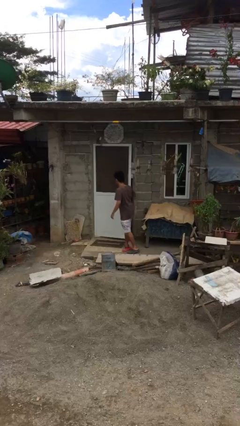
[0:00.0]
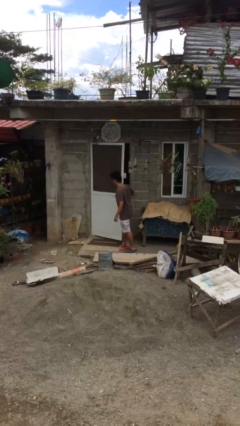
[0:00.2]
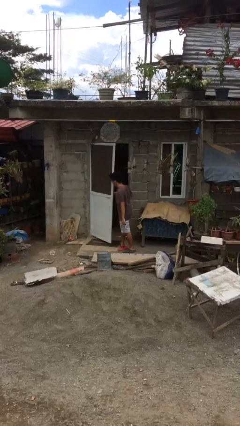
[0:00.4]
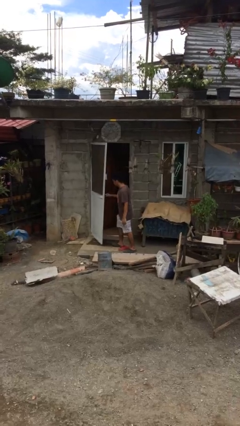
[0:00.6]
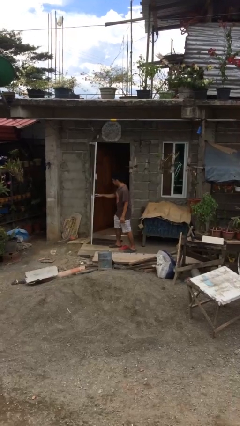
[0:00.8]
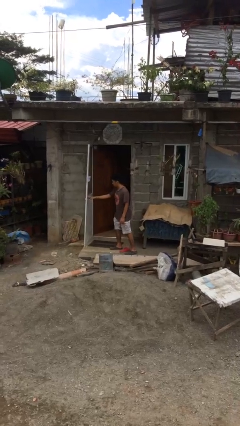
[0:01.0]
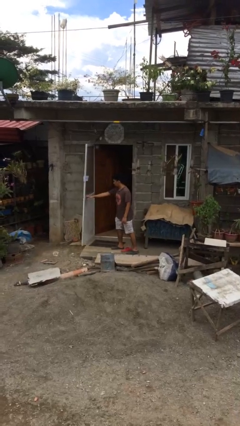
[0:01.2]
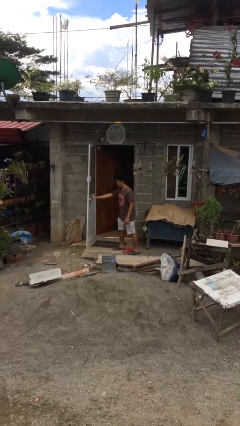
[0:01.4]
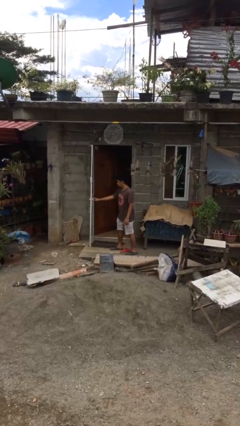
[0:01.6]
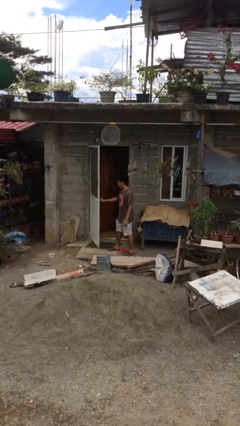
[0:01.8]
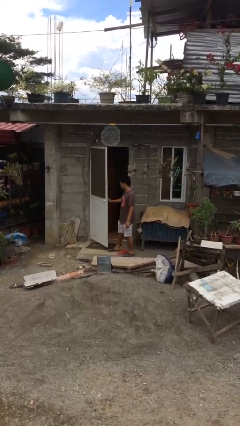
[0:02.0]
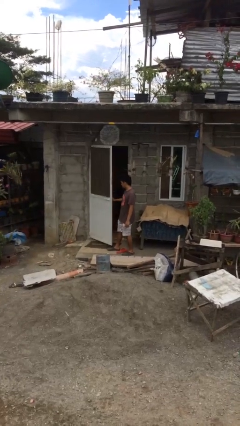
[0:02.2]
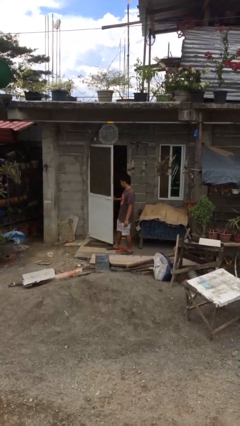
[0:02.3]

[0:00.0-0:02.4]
person opens facility door

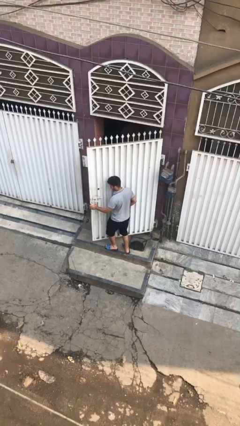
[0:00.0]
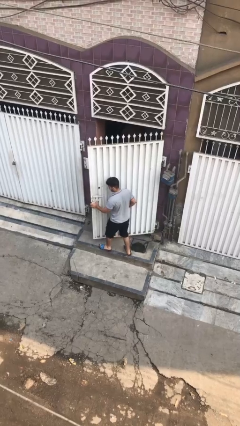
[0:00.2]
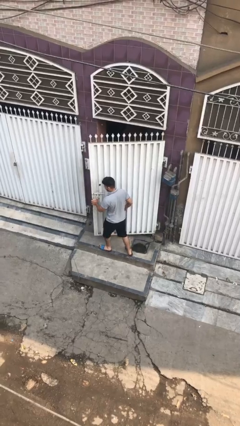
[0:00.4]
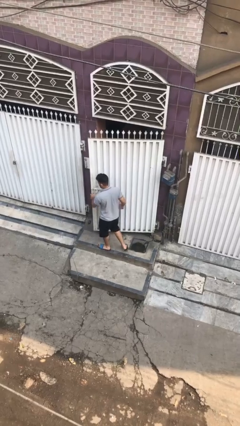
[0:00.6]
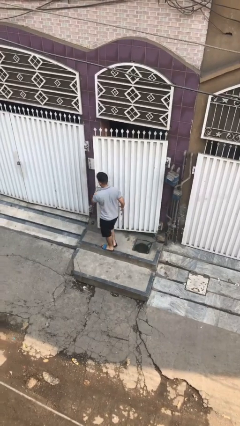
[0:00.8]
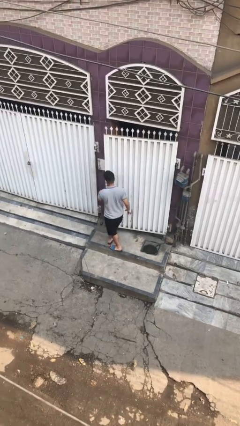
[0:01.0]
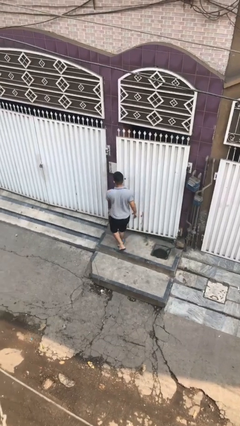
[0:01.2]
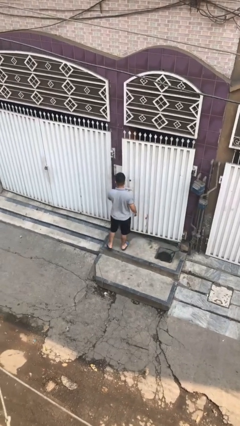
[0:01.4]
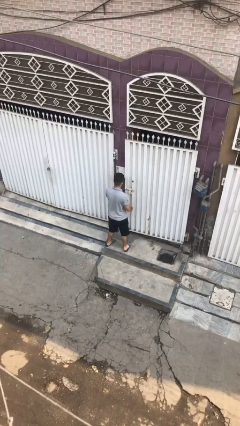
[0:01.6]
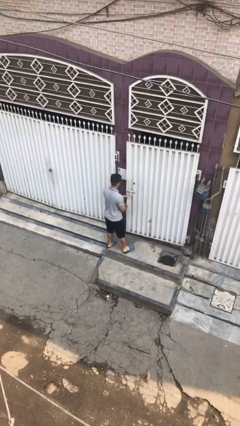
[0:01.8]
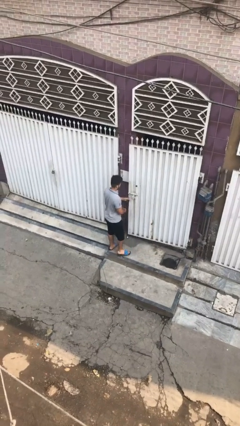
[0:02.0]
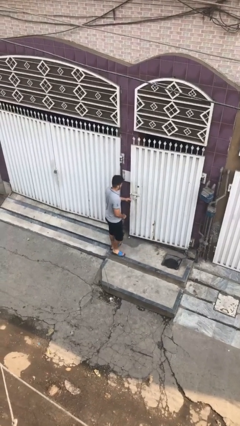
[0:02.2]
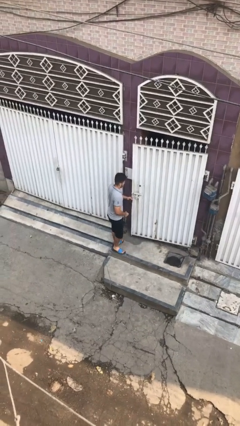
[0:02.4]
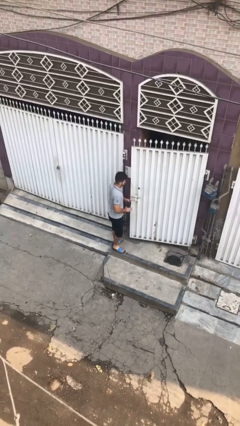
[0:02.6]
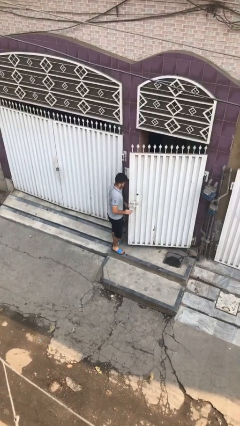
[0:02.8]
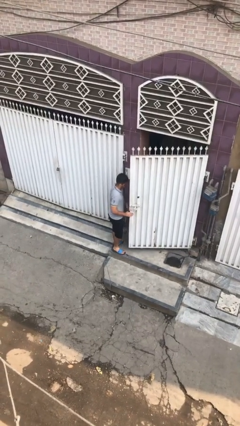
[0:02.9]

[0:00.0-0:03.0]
person closes facility door

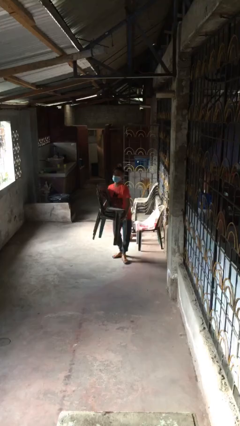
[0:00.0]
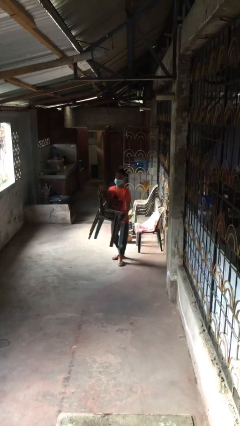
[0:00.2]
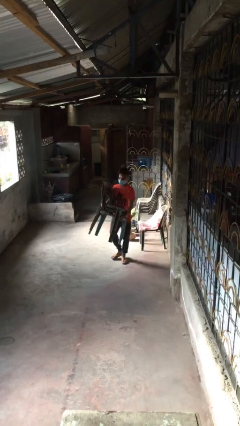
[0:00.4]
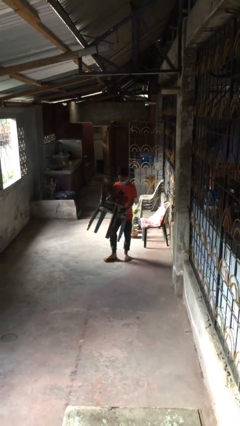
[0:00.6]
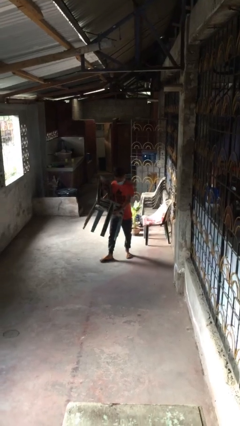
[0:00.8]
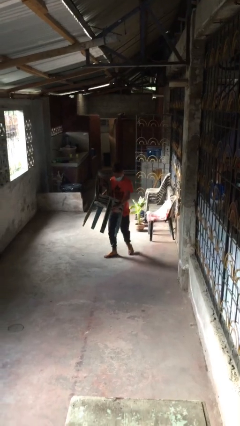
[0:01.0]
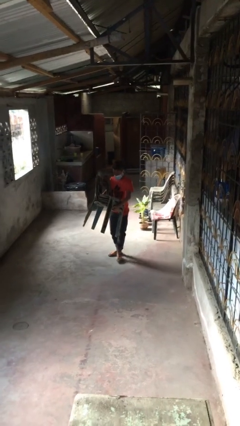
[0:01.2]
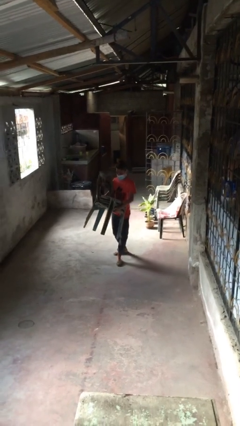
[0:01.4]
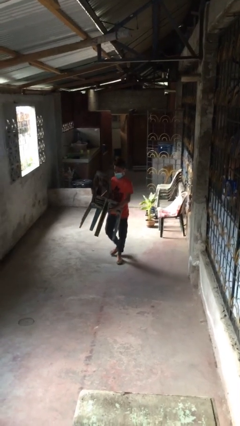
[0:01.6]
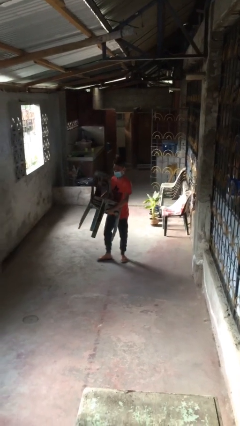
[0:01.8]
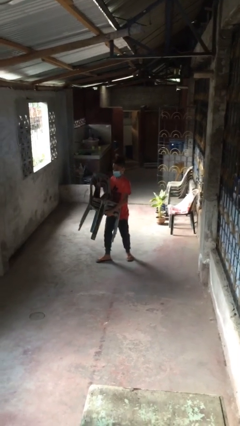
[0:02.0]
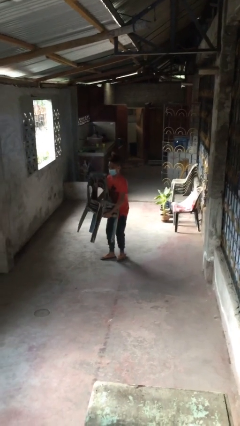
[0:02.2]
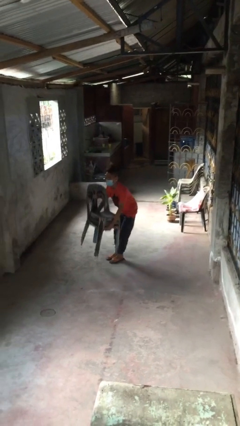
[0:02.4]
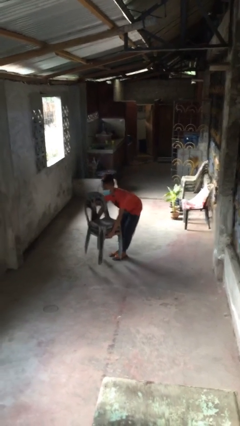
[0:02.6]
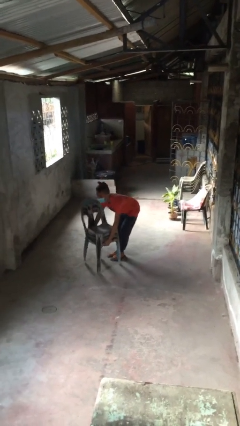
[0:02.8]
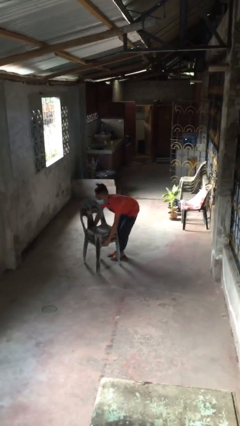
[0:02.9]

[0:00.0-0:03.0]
person carries heavy object

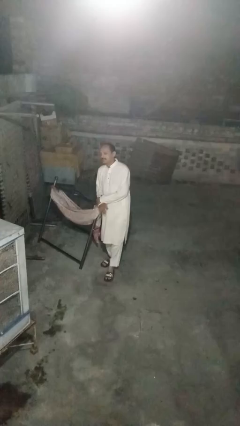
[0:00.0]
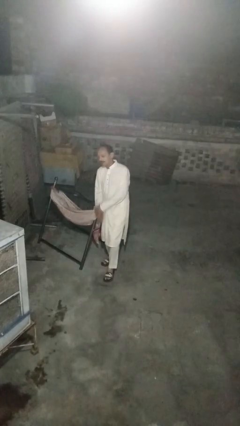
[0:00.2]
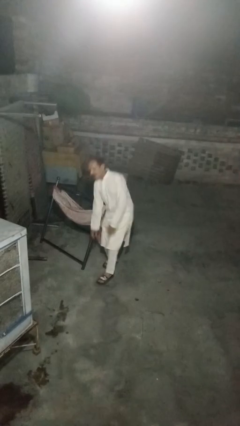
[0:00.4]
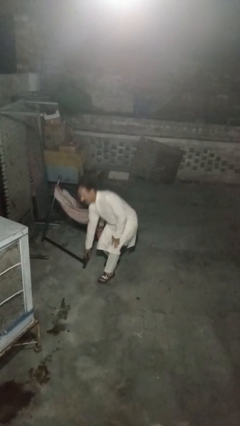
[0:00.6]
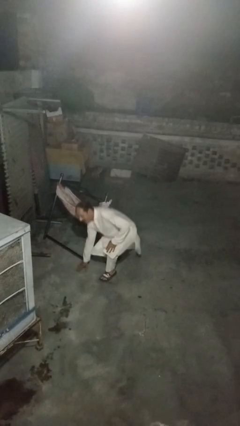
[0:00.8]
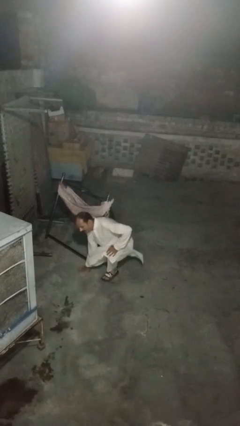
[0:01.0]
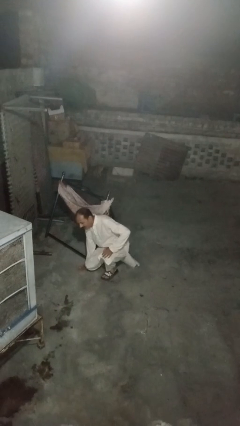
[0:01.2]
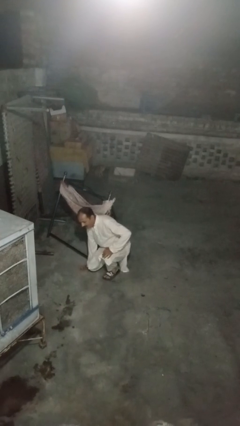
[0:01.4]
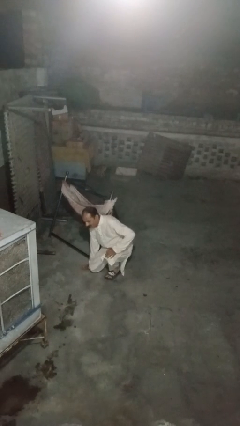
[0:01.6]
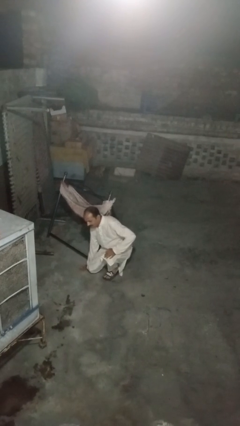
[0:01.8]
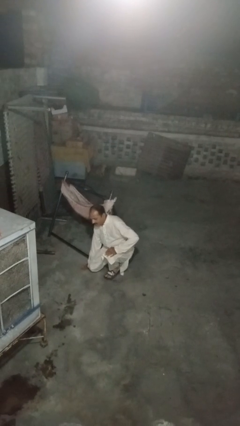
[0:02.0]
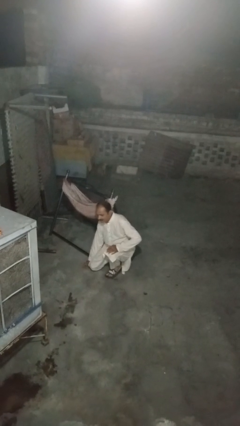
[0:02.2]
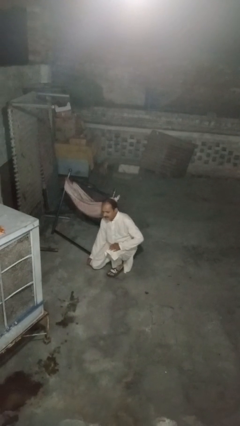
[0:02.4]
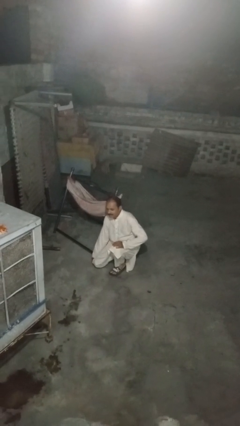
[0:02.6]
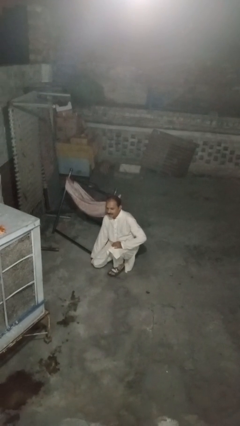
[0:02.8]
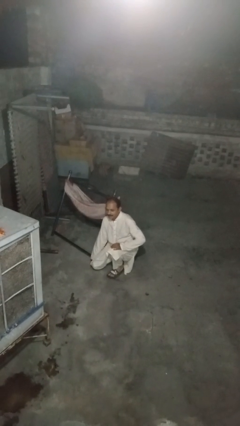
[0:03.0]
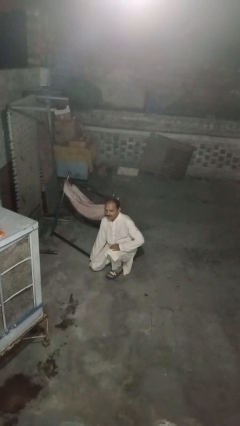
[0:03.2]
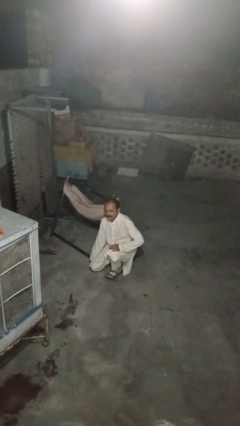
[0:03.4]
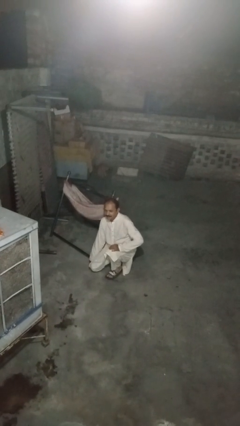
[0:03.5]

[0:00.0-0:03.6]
person falls while standing

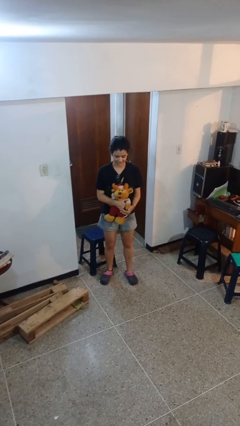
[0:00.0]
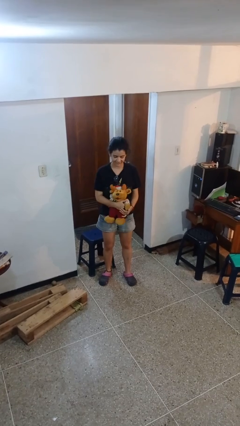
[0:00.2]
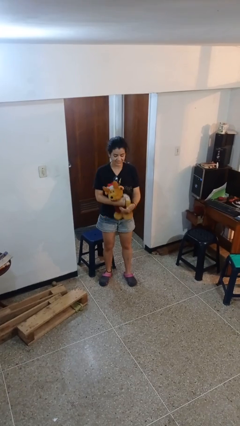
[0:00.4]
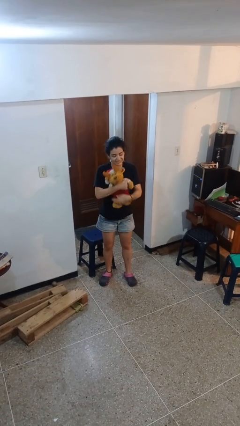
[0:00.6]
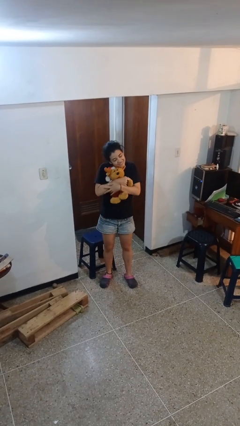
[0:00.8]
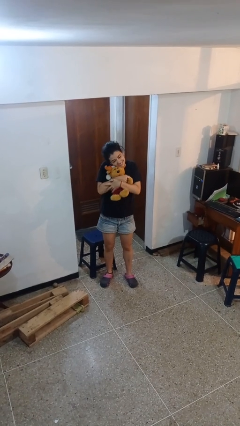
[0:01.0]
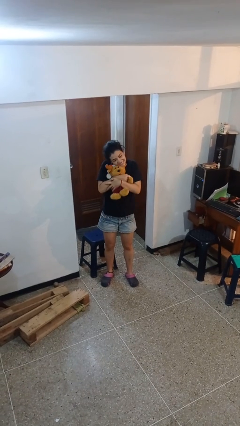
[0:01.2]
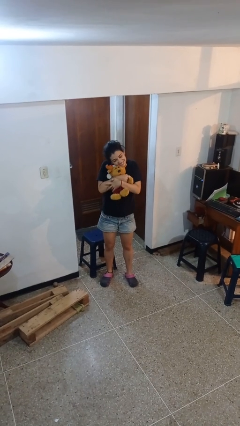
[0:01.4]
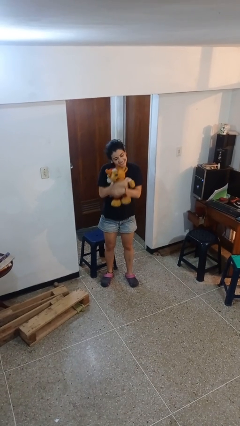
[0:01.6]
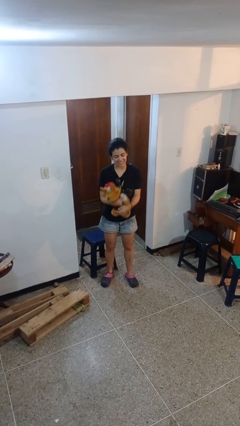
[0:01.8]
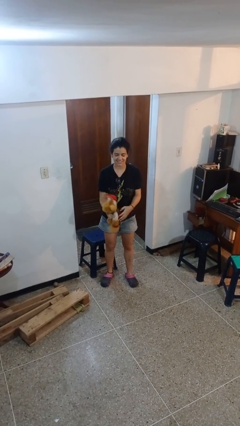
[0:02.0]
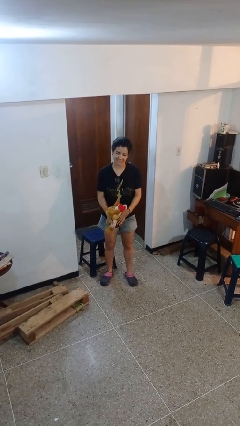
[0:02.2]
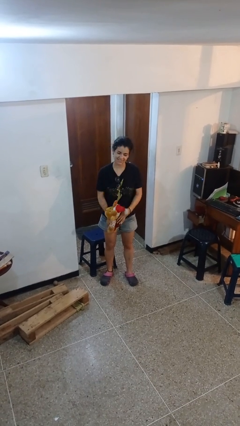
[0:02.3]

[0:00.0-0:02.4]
person hugs stuffed animal

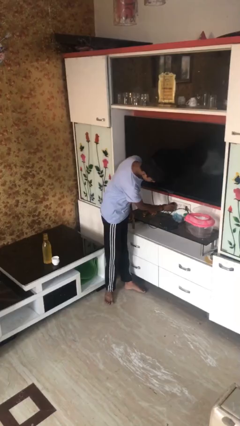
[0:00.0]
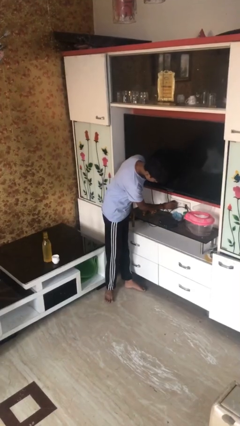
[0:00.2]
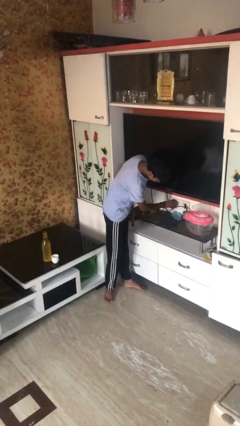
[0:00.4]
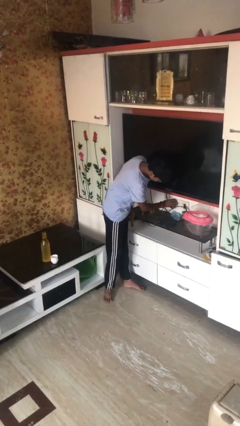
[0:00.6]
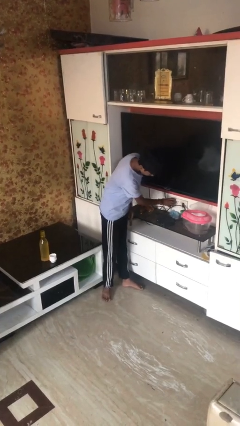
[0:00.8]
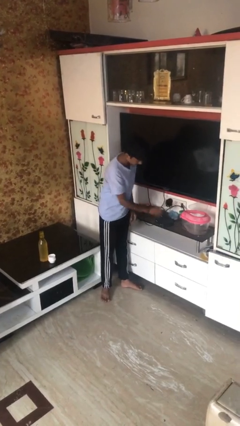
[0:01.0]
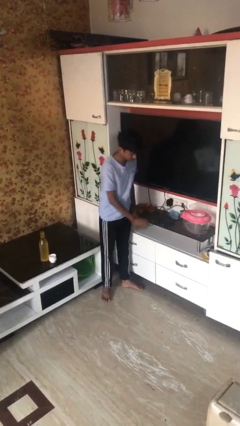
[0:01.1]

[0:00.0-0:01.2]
person plugs into electrical socket

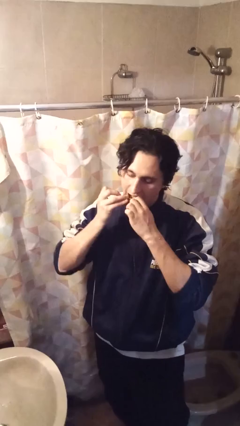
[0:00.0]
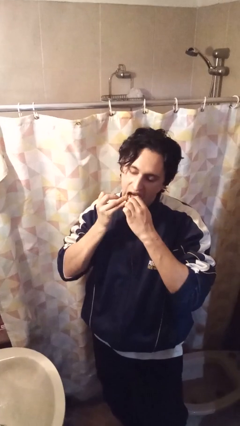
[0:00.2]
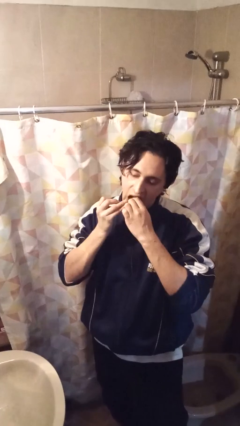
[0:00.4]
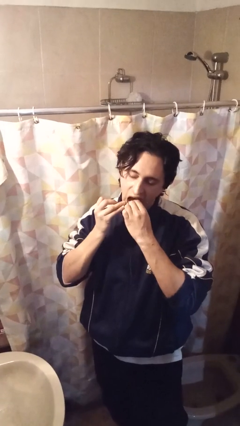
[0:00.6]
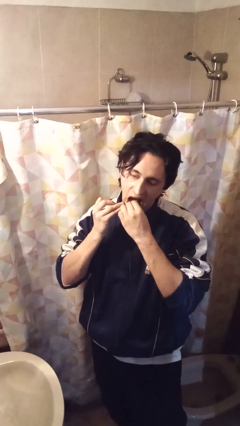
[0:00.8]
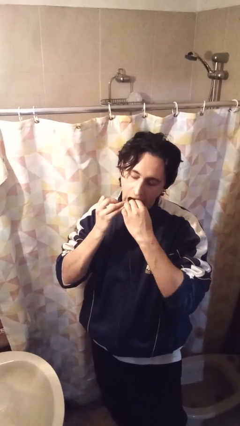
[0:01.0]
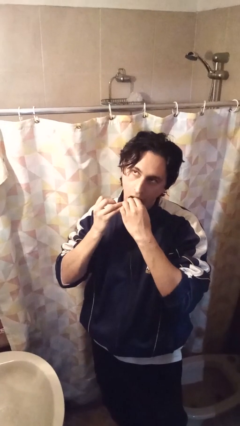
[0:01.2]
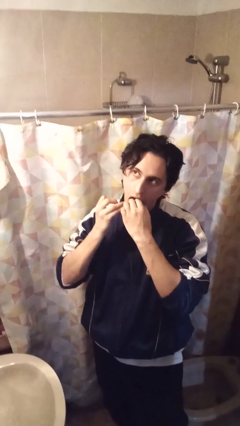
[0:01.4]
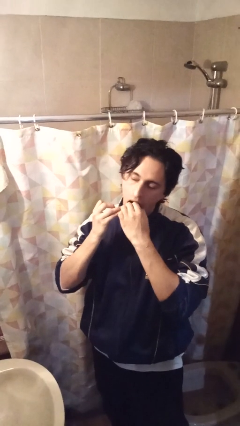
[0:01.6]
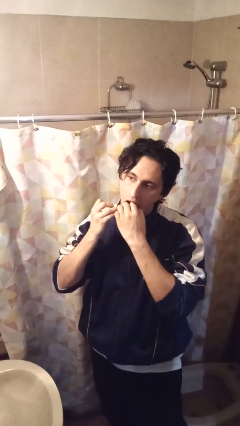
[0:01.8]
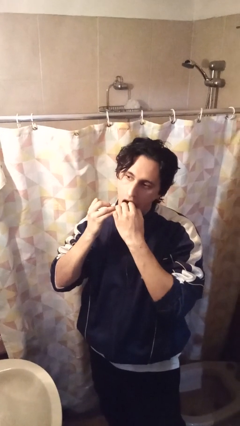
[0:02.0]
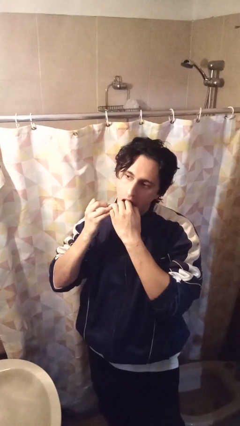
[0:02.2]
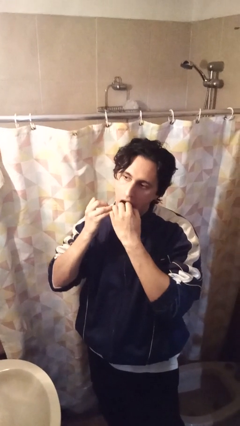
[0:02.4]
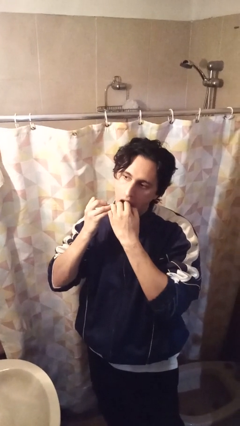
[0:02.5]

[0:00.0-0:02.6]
person flosses
